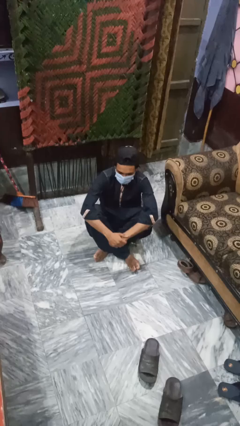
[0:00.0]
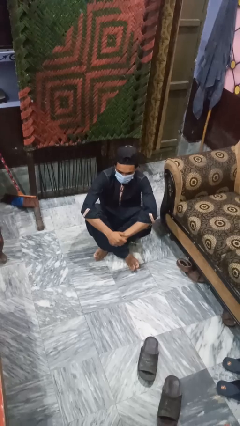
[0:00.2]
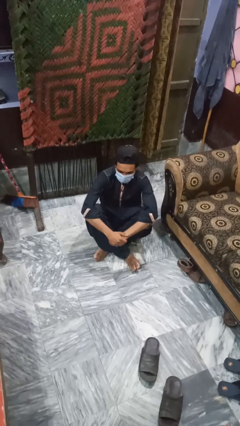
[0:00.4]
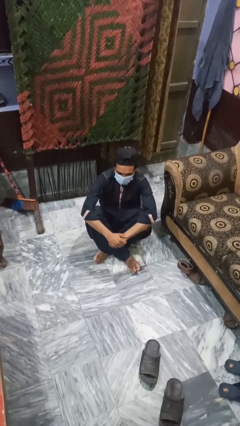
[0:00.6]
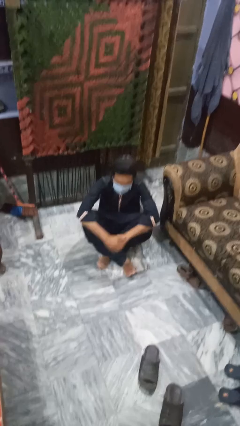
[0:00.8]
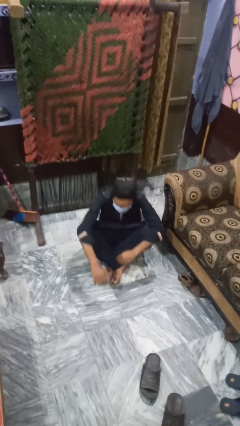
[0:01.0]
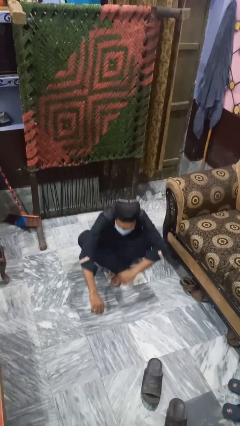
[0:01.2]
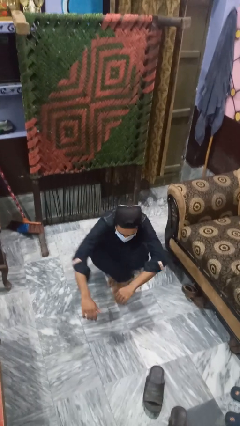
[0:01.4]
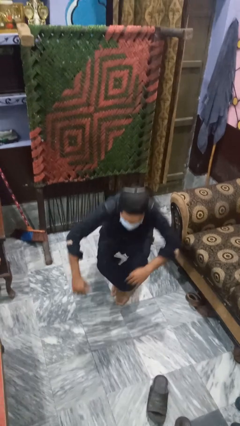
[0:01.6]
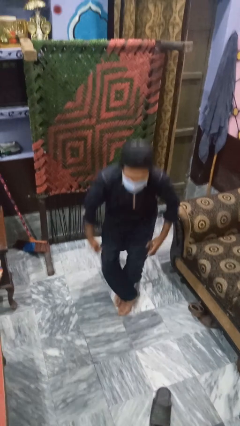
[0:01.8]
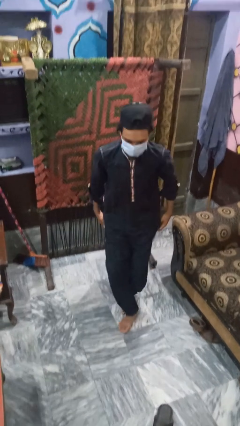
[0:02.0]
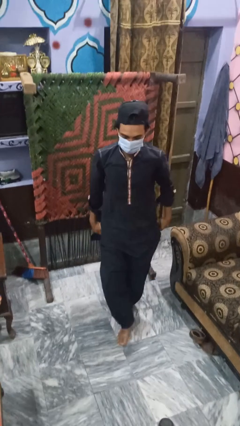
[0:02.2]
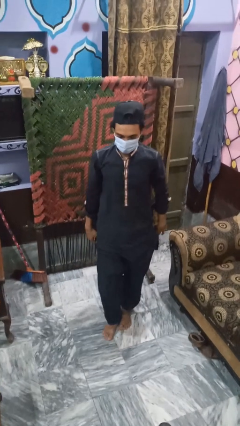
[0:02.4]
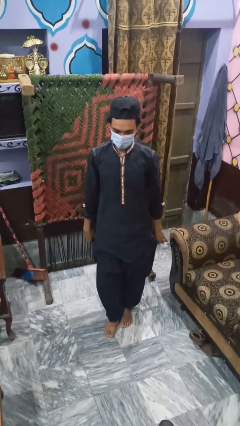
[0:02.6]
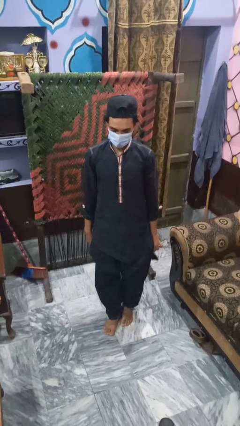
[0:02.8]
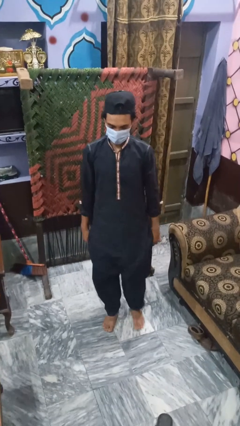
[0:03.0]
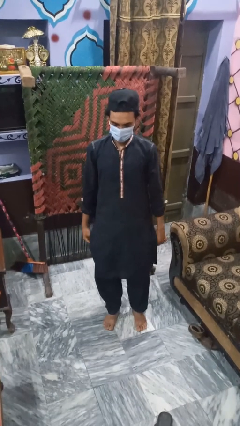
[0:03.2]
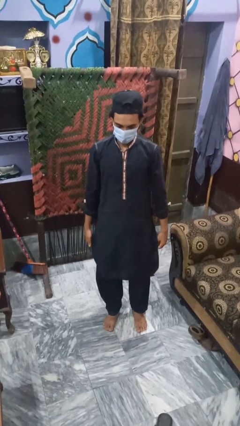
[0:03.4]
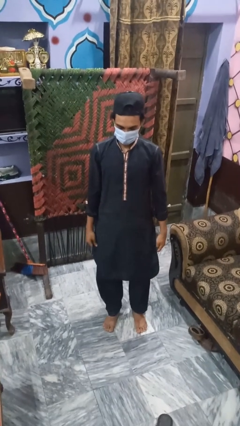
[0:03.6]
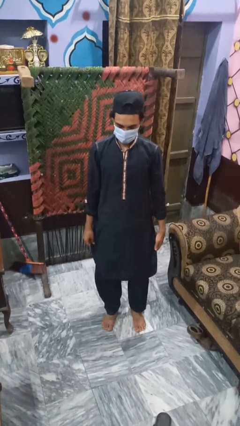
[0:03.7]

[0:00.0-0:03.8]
person stands up from floor

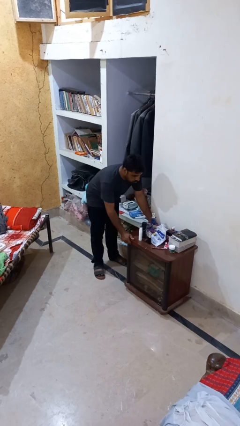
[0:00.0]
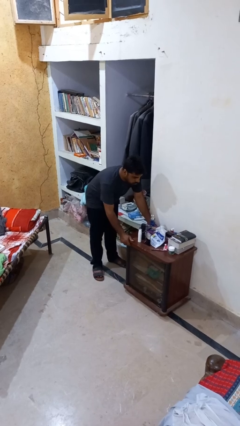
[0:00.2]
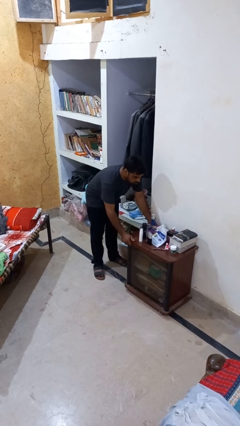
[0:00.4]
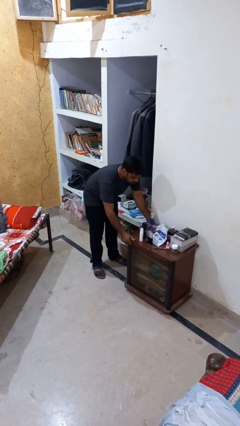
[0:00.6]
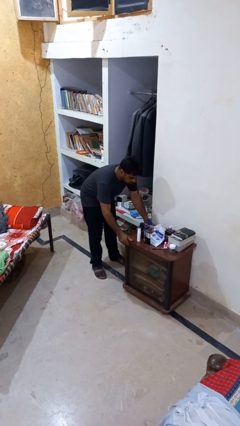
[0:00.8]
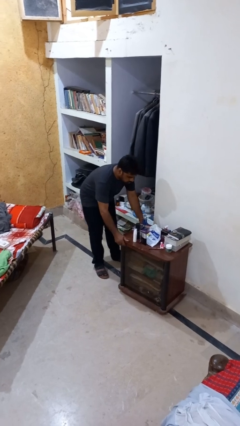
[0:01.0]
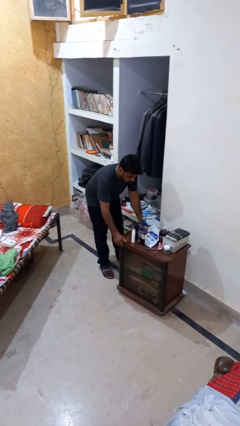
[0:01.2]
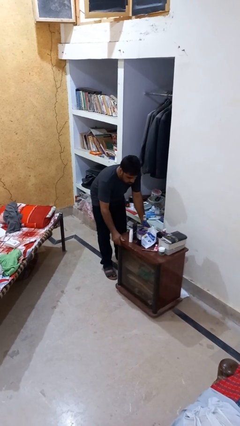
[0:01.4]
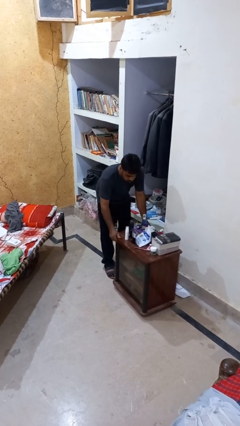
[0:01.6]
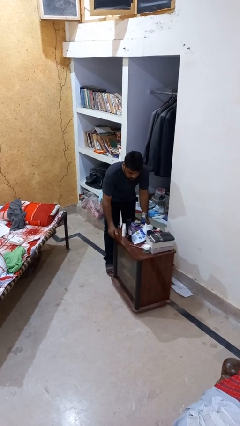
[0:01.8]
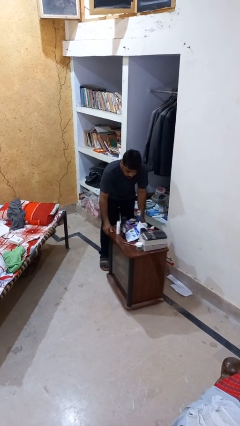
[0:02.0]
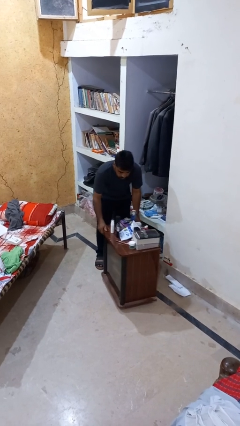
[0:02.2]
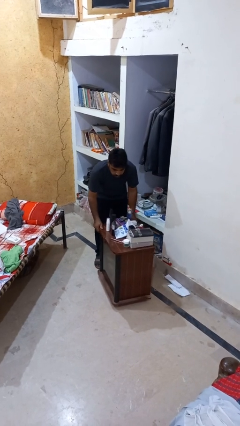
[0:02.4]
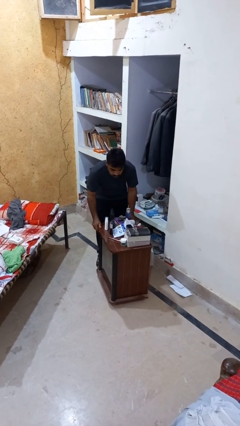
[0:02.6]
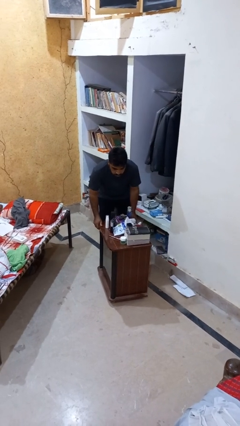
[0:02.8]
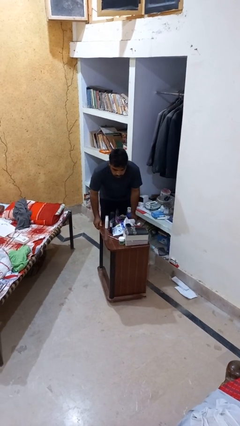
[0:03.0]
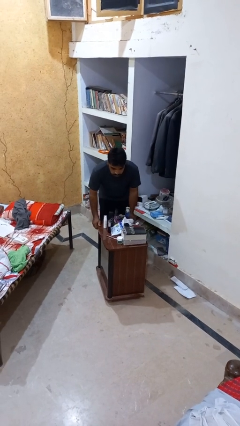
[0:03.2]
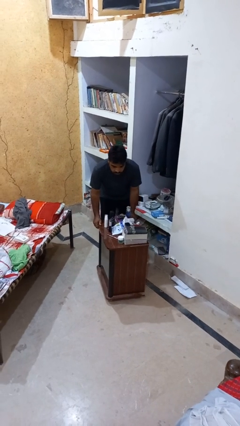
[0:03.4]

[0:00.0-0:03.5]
person pulls wheeled cart

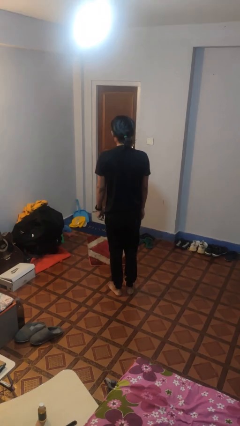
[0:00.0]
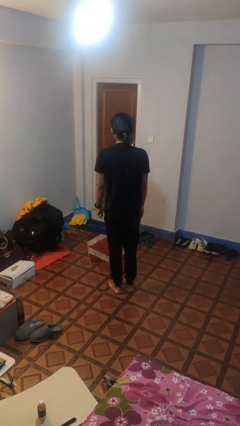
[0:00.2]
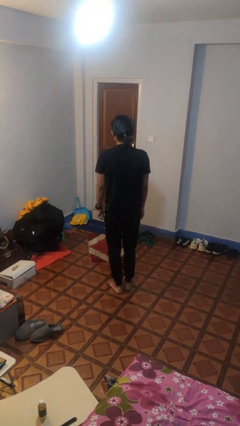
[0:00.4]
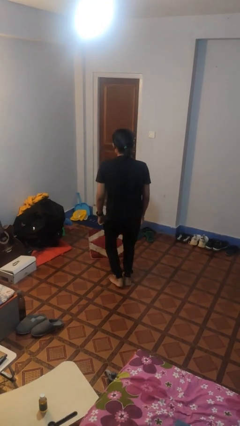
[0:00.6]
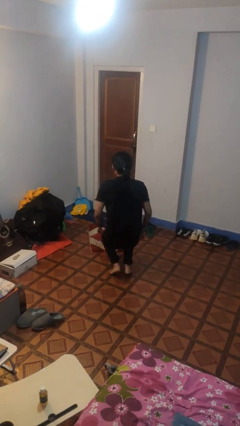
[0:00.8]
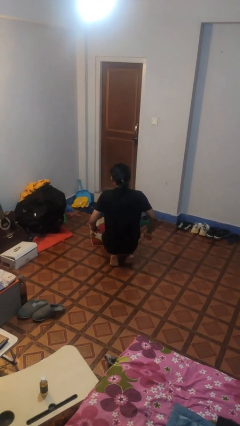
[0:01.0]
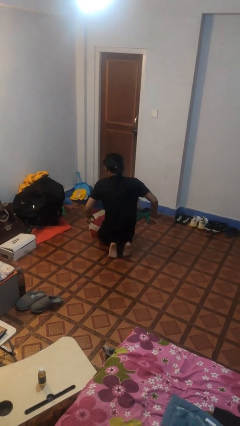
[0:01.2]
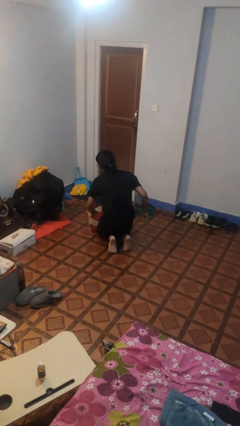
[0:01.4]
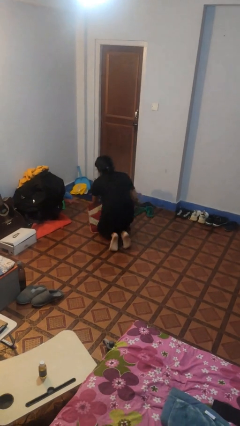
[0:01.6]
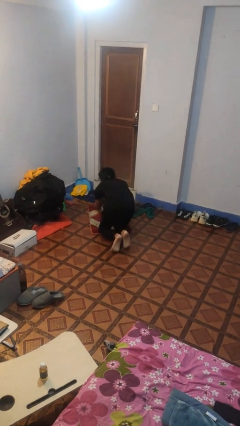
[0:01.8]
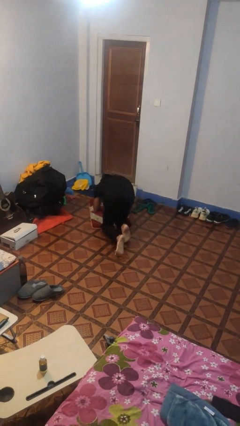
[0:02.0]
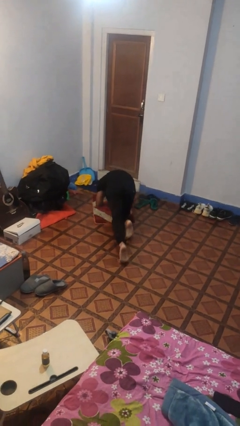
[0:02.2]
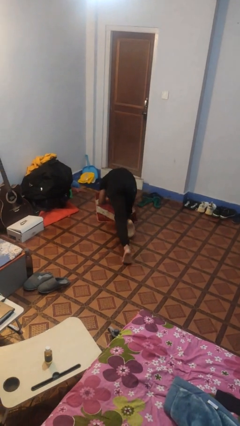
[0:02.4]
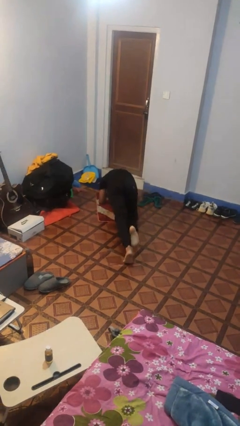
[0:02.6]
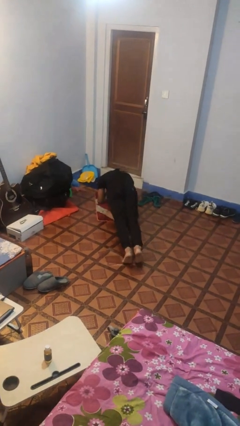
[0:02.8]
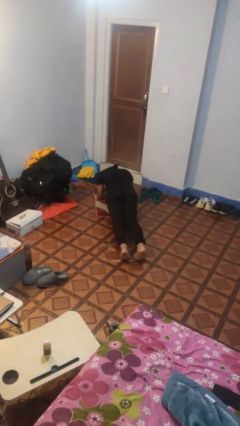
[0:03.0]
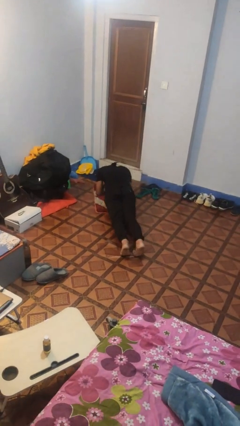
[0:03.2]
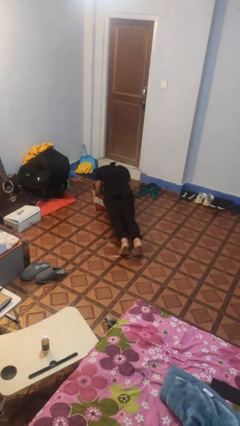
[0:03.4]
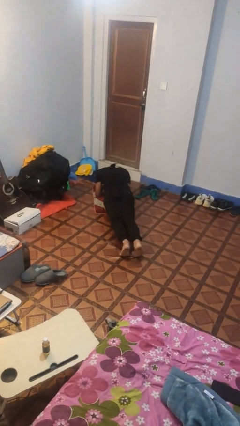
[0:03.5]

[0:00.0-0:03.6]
person exercises with plank

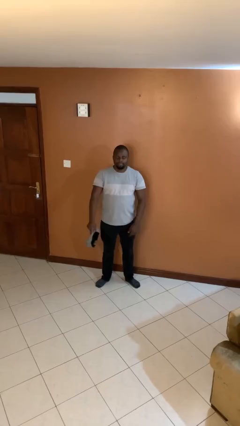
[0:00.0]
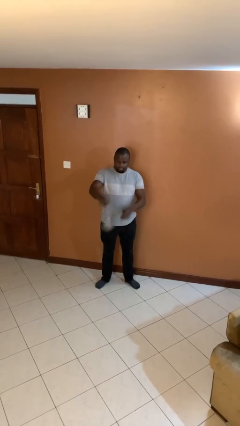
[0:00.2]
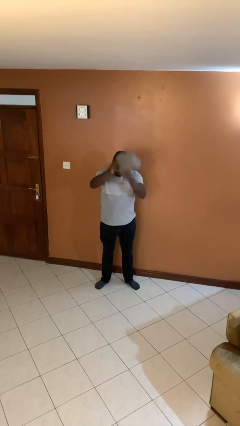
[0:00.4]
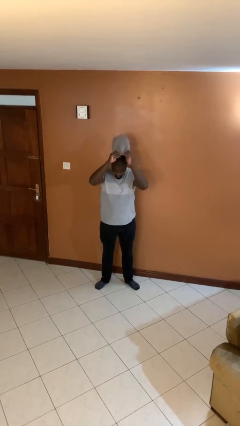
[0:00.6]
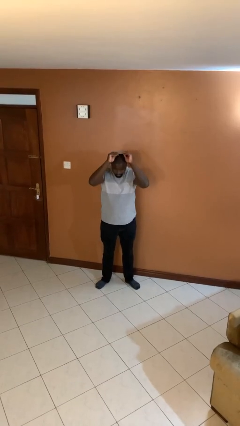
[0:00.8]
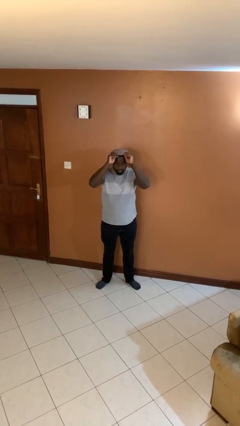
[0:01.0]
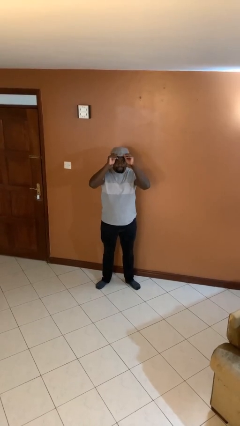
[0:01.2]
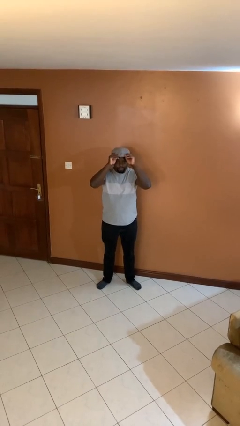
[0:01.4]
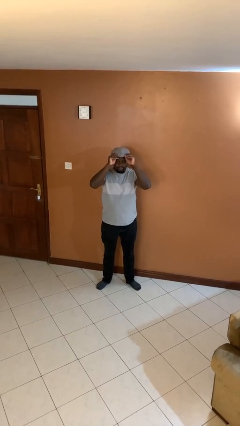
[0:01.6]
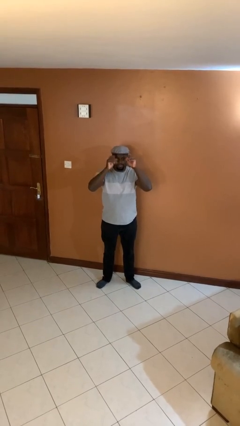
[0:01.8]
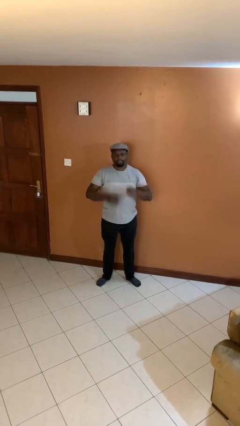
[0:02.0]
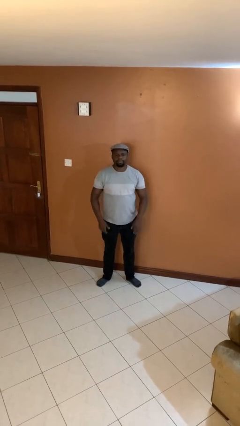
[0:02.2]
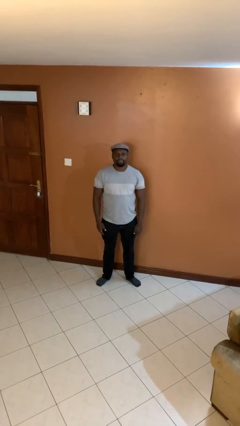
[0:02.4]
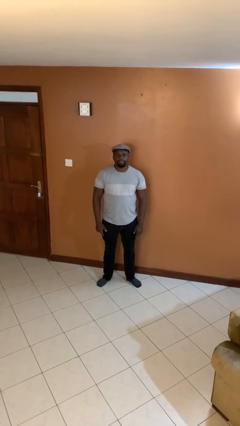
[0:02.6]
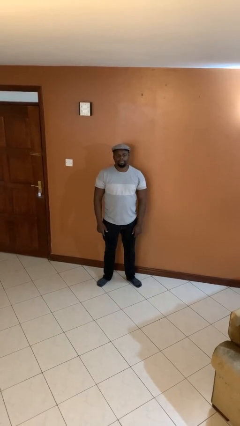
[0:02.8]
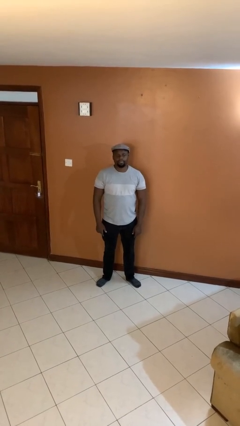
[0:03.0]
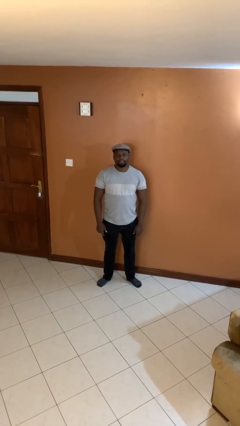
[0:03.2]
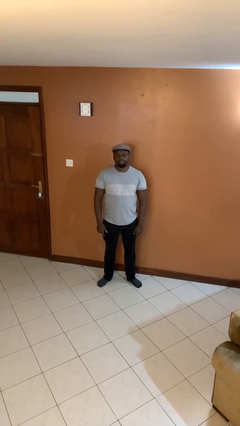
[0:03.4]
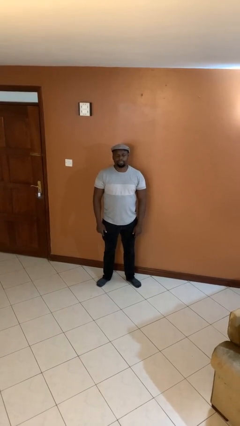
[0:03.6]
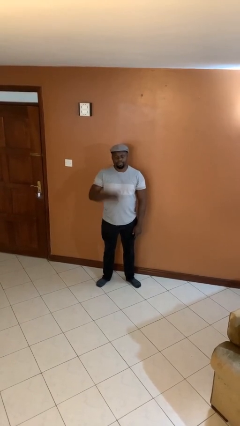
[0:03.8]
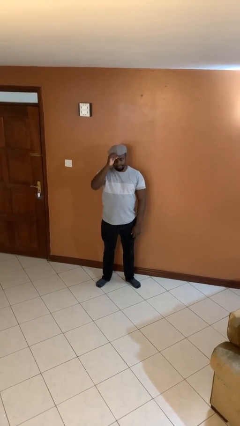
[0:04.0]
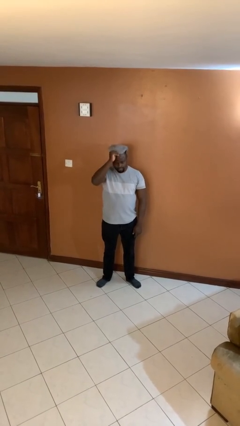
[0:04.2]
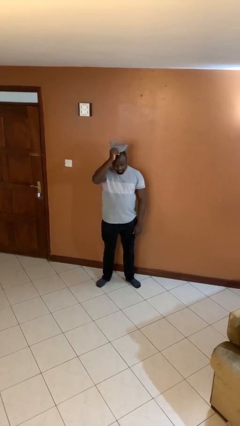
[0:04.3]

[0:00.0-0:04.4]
person puts on hat

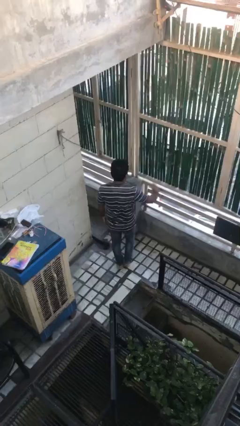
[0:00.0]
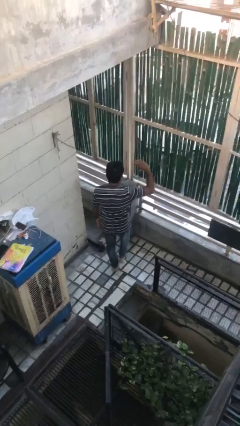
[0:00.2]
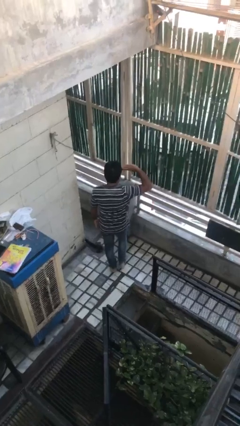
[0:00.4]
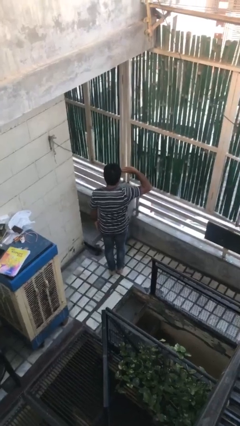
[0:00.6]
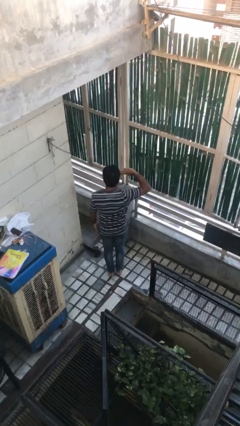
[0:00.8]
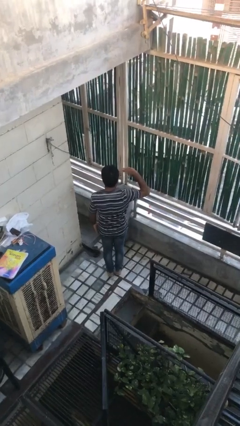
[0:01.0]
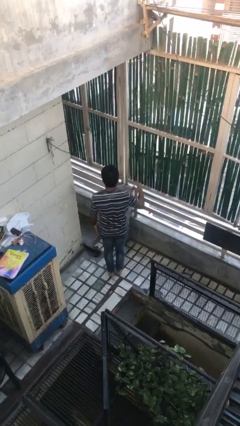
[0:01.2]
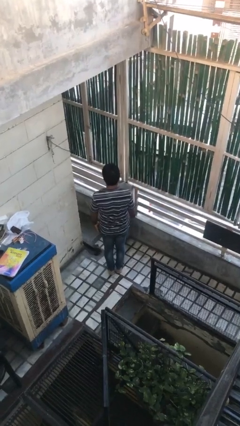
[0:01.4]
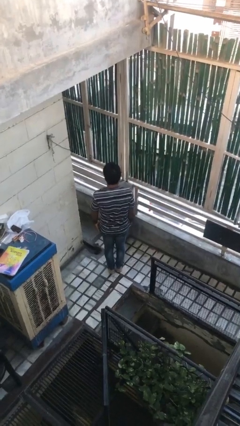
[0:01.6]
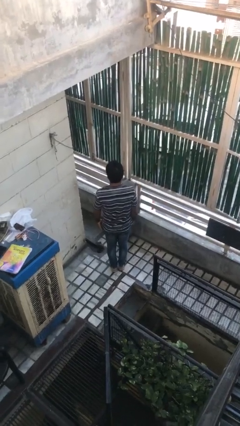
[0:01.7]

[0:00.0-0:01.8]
person salutes

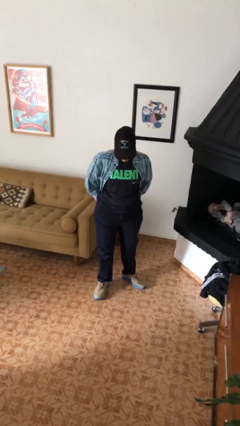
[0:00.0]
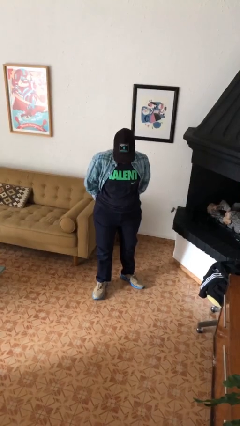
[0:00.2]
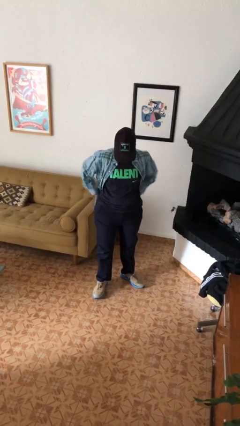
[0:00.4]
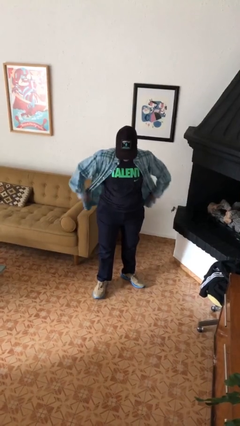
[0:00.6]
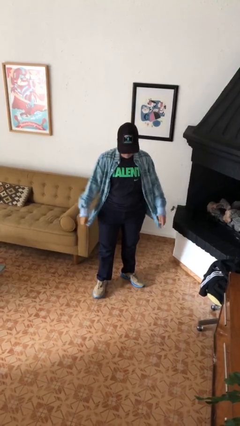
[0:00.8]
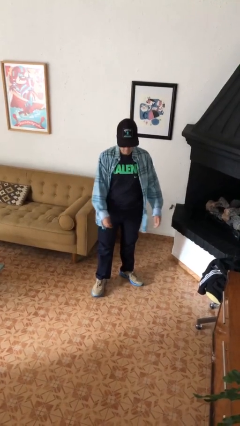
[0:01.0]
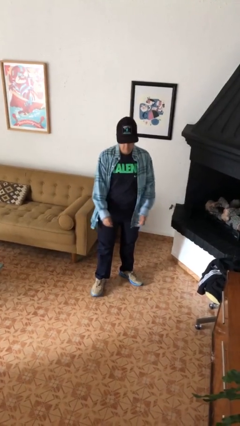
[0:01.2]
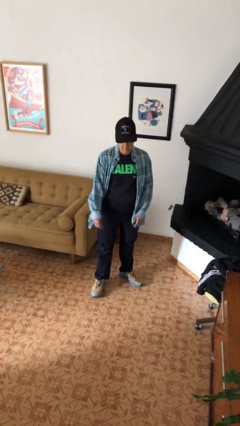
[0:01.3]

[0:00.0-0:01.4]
person puts hands in back pockets
